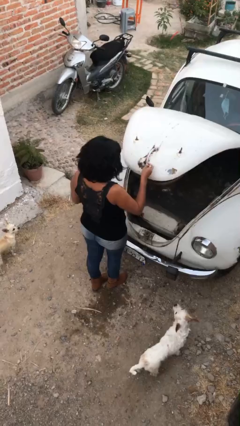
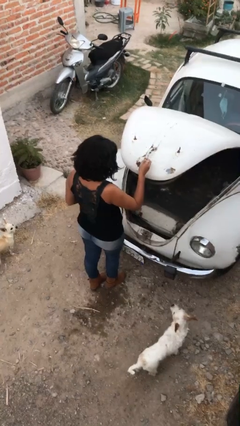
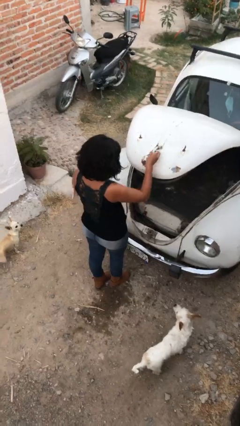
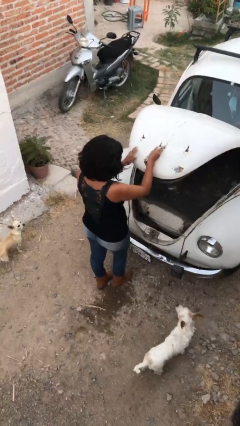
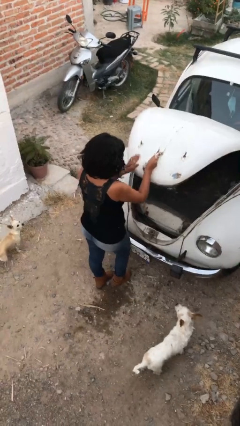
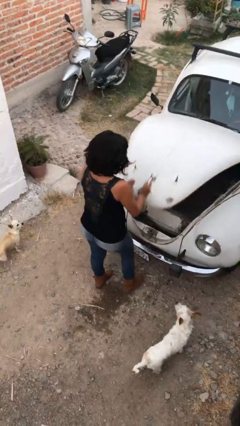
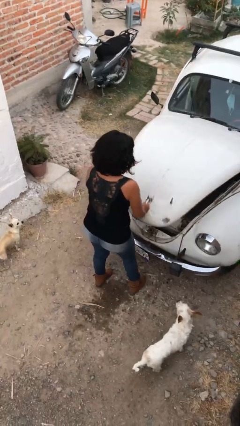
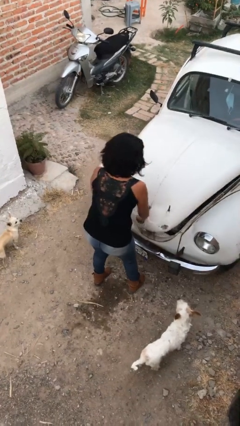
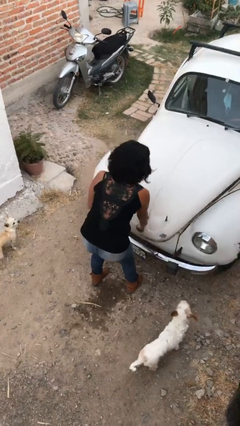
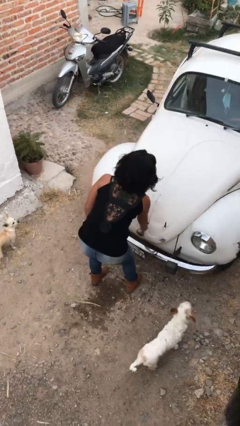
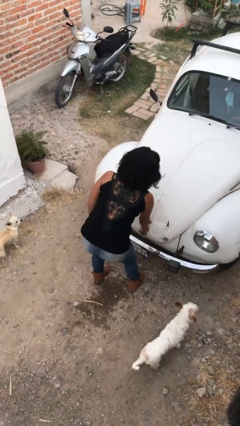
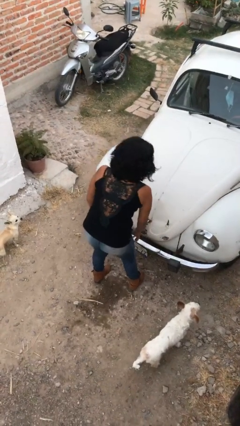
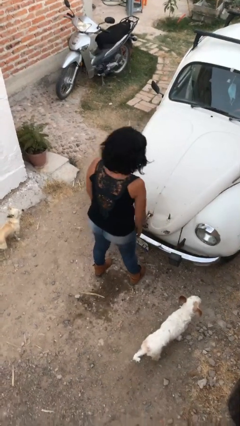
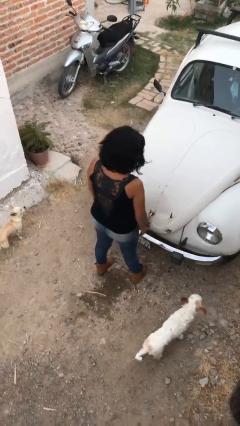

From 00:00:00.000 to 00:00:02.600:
person closes car trunk

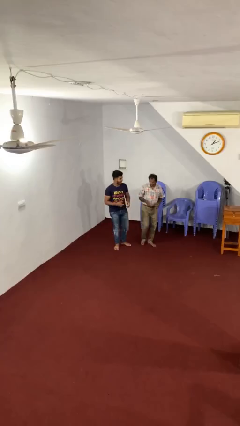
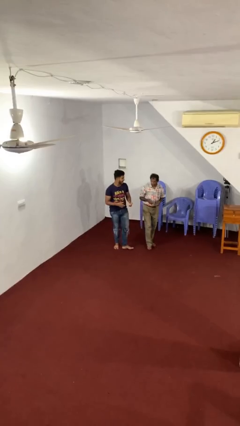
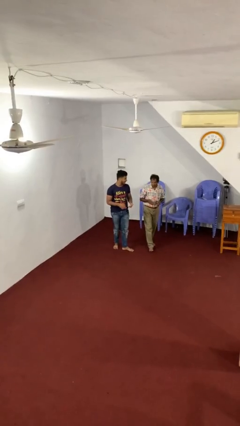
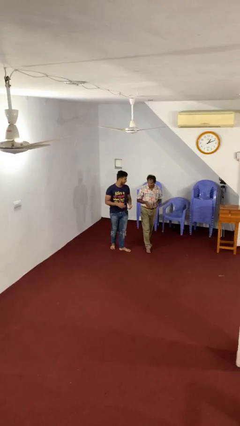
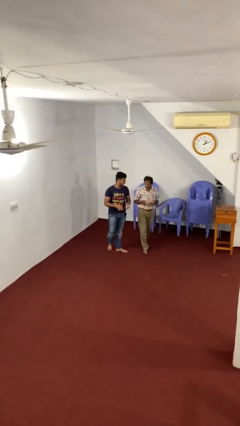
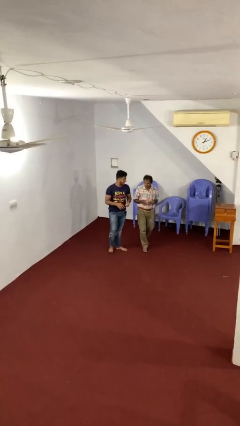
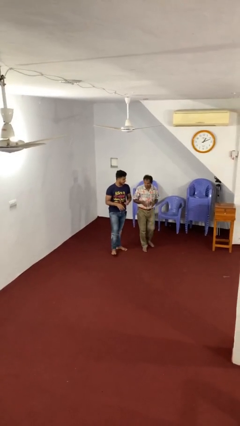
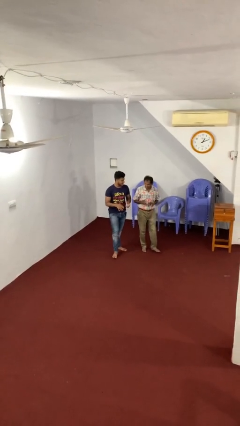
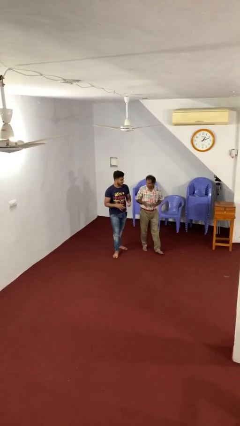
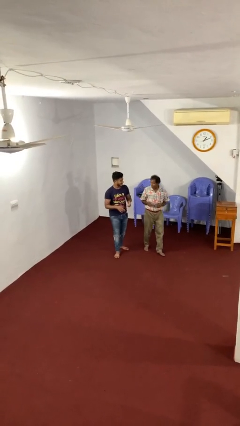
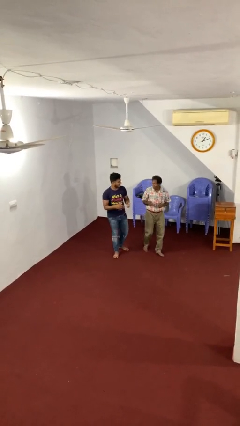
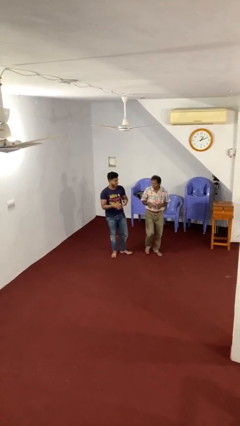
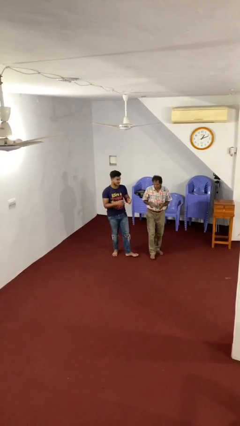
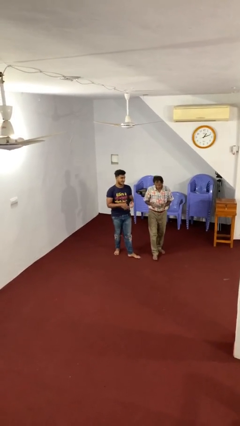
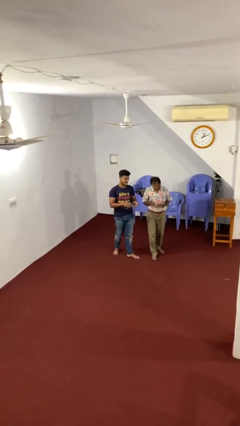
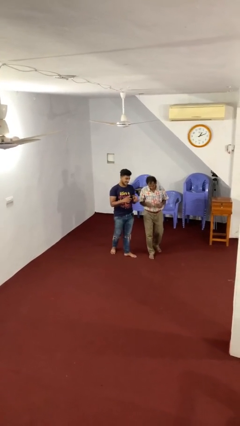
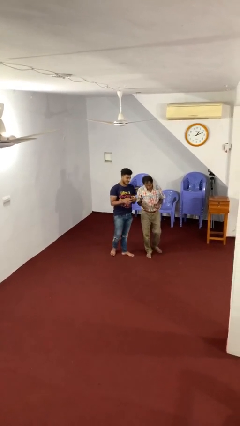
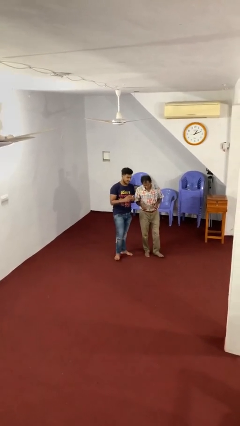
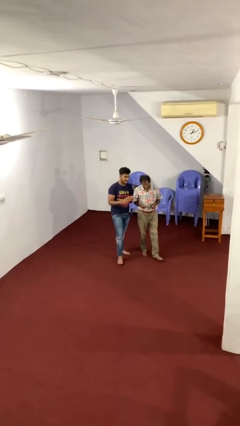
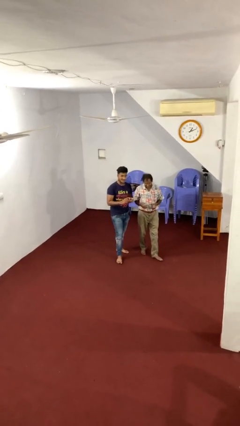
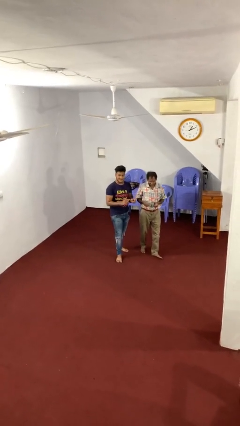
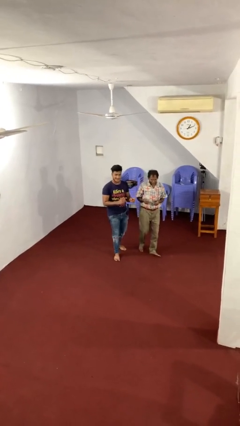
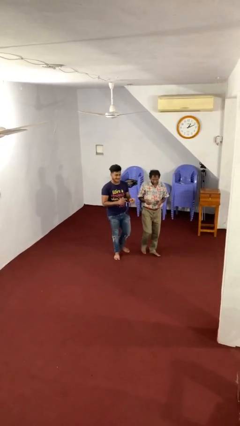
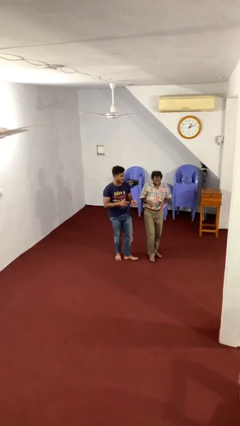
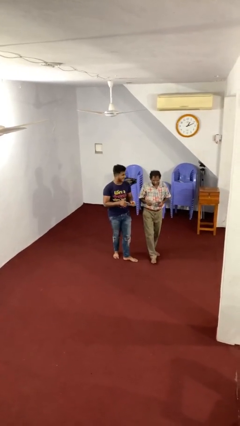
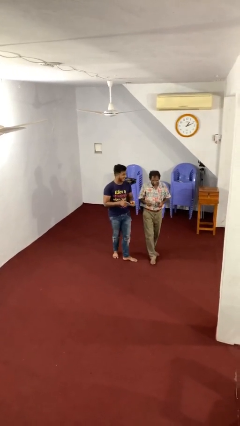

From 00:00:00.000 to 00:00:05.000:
person talks to person

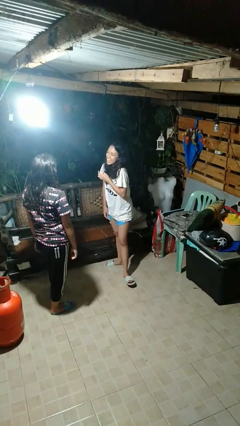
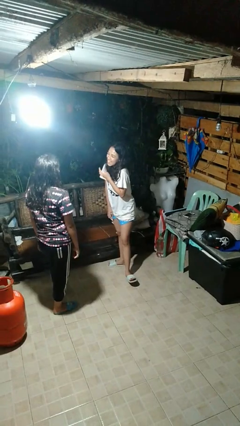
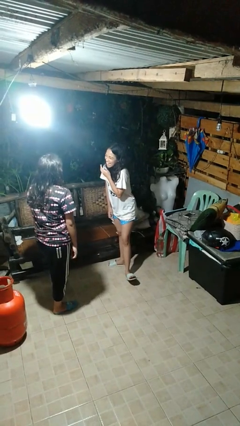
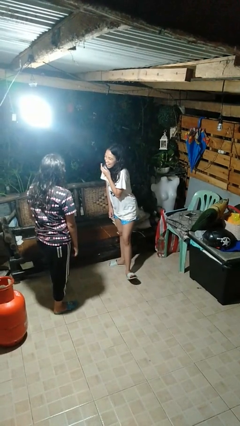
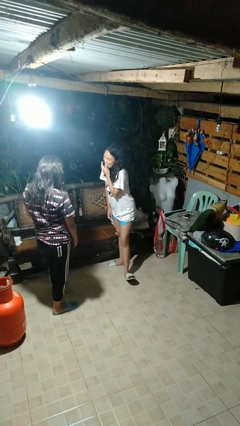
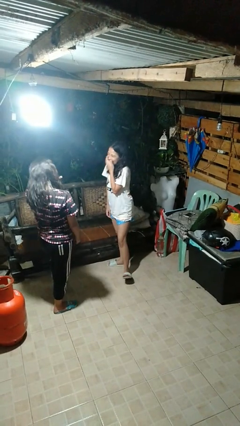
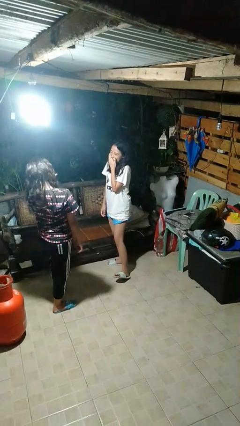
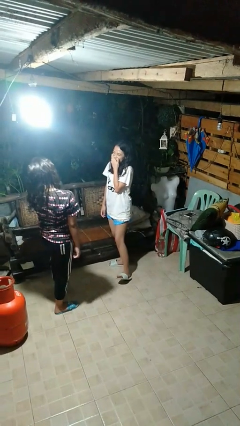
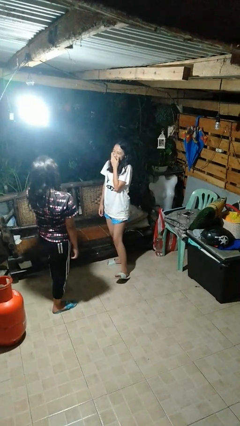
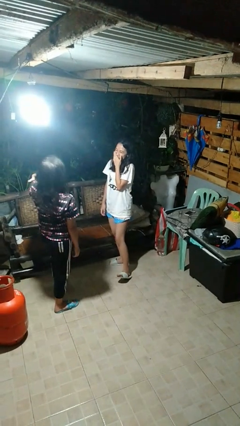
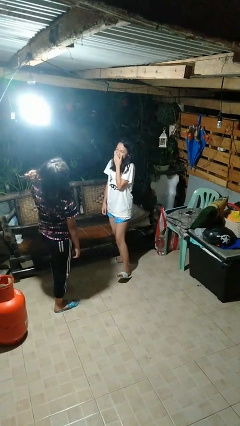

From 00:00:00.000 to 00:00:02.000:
person laughs with person

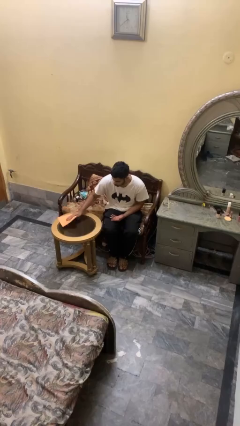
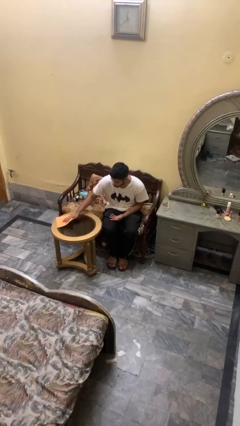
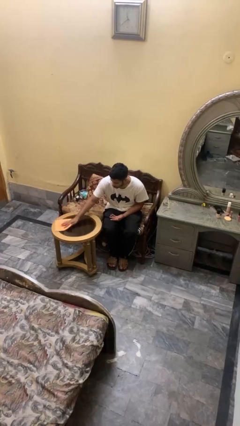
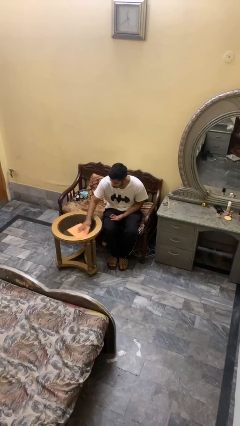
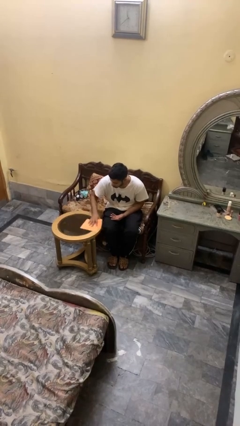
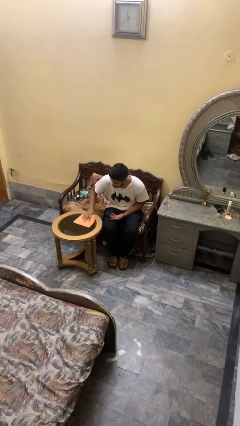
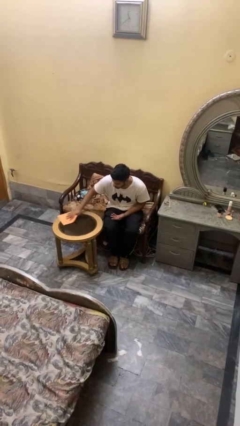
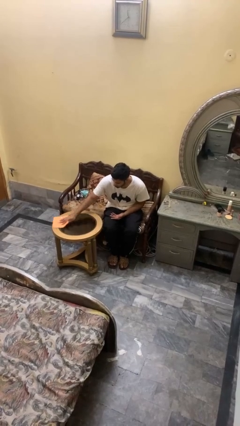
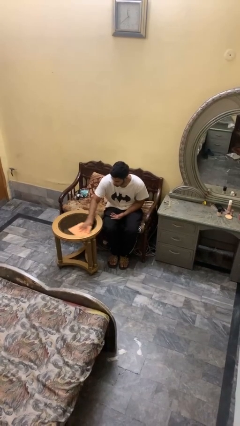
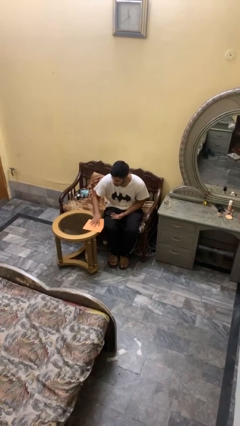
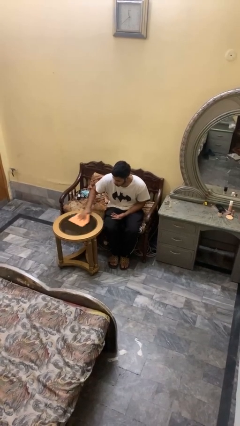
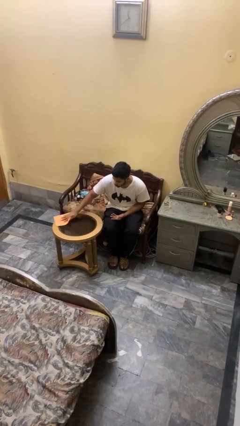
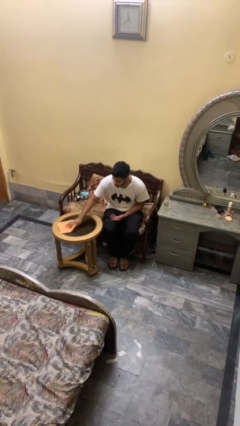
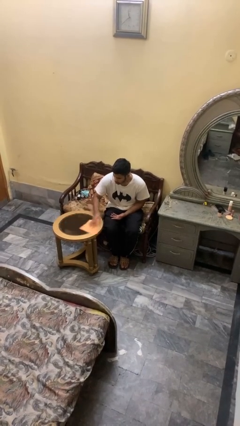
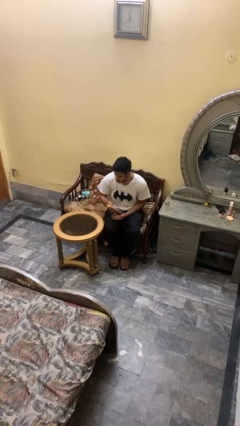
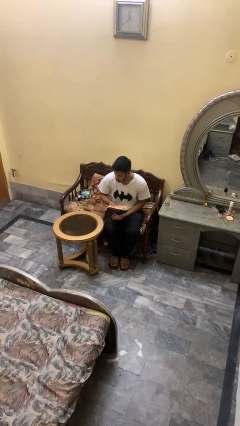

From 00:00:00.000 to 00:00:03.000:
person cleans table with rag

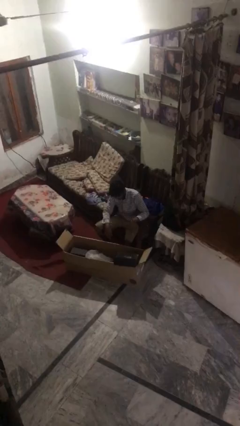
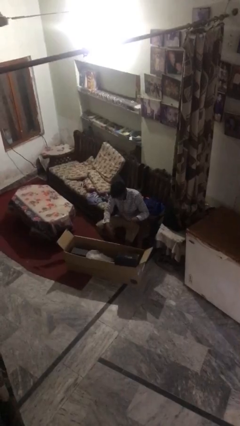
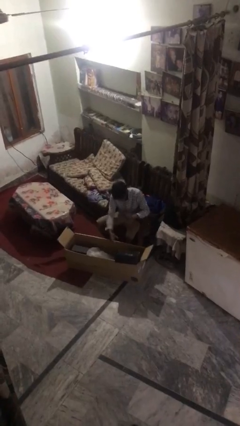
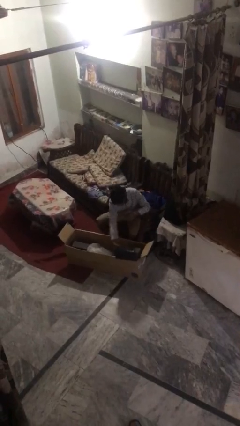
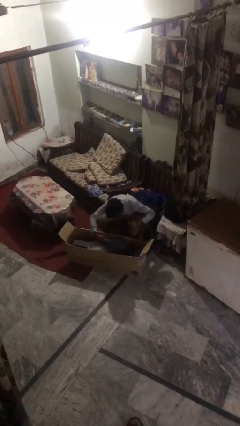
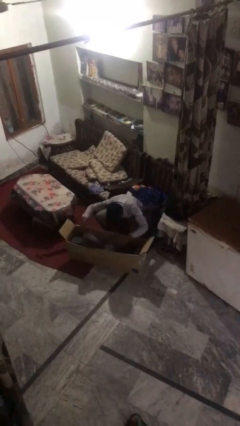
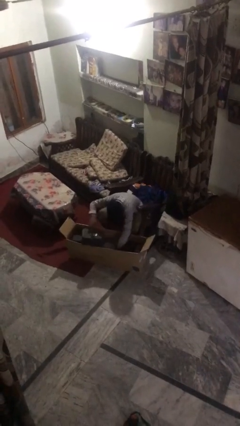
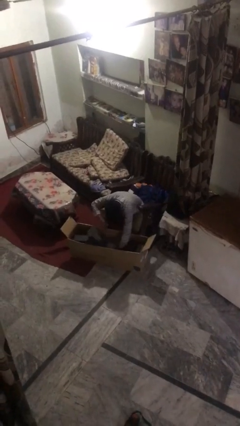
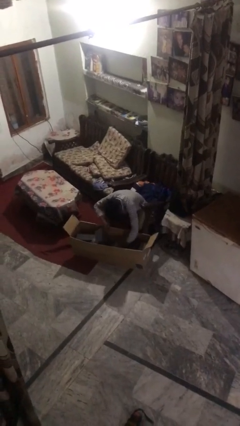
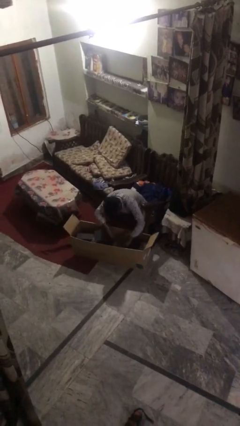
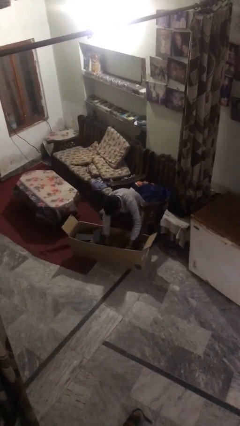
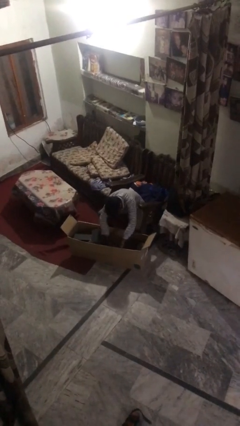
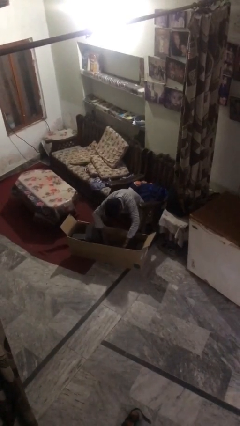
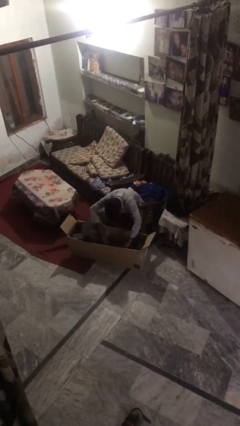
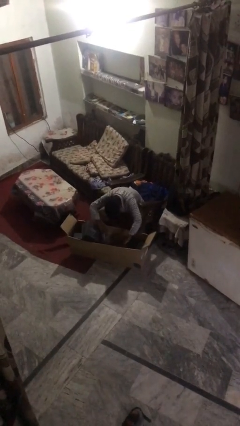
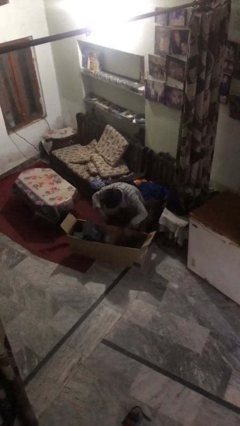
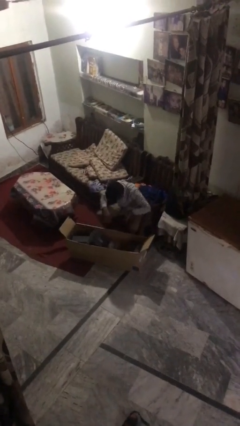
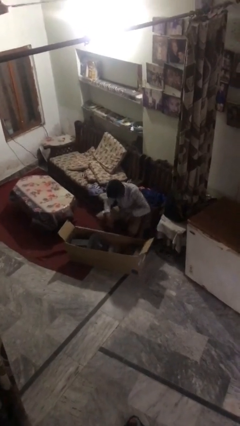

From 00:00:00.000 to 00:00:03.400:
person searches in box

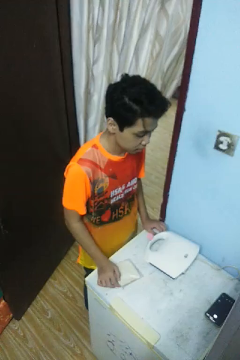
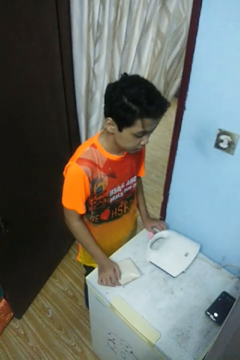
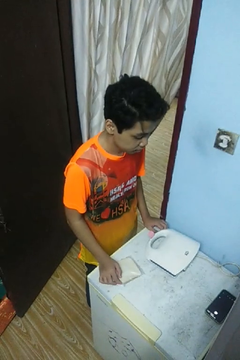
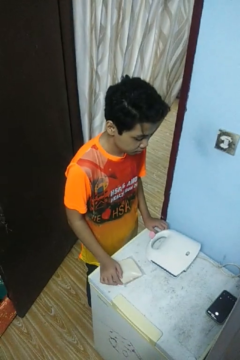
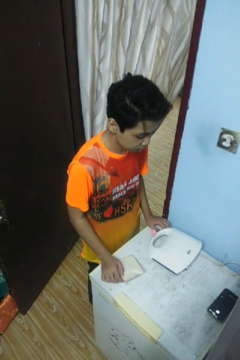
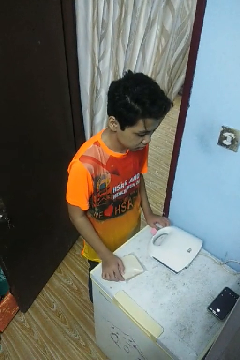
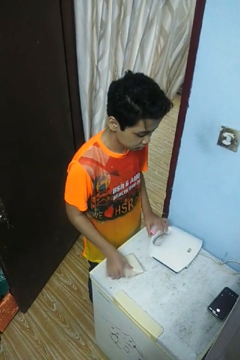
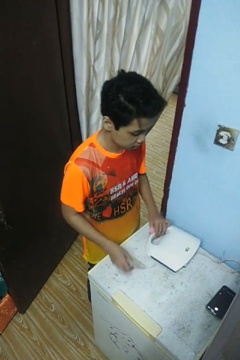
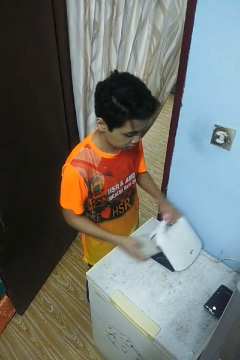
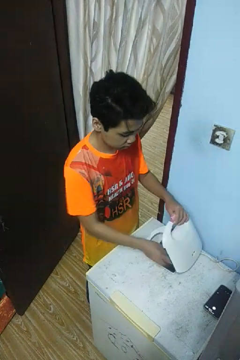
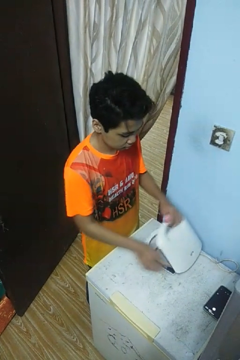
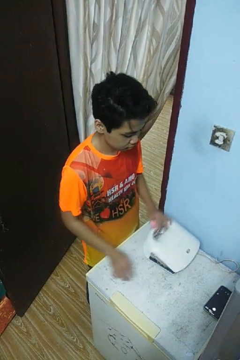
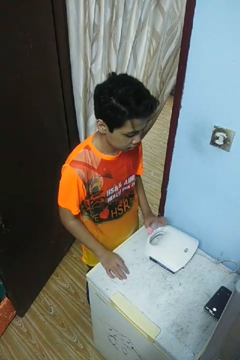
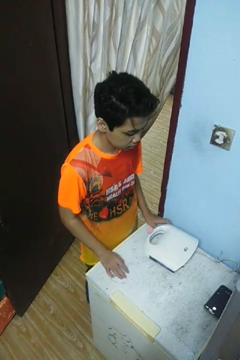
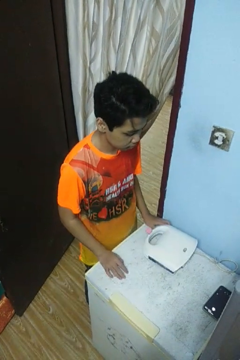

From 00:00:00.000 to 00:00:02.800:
person puts object into toaster
